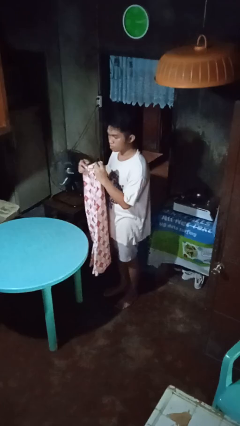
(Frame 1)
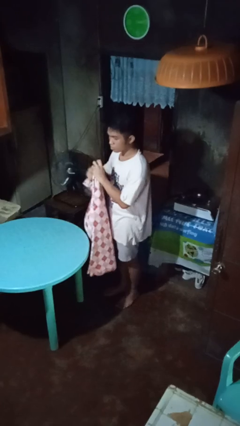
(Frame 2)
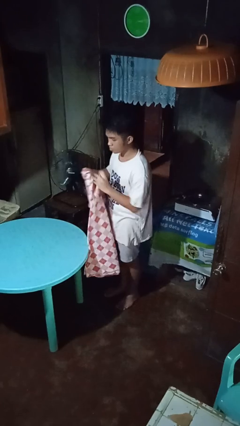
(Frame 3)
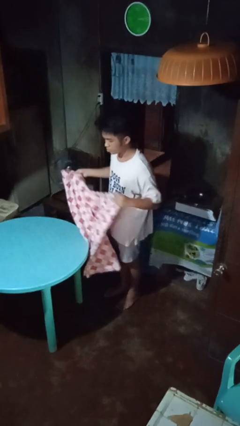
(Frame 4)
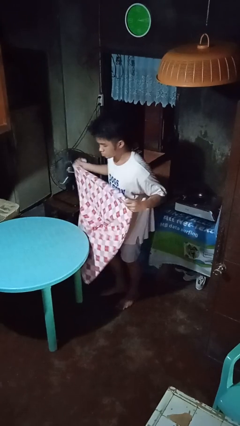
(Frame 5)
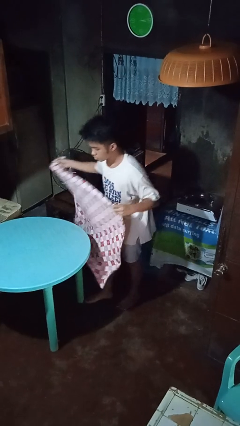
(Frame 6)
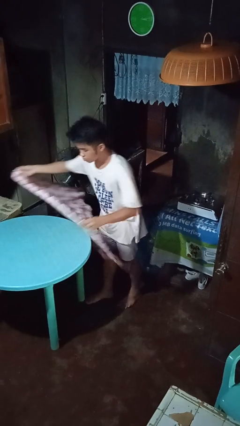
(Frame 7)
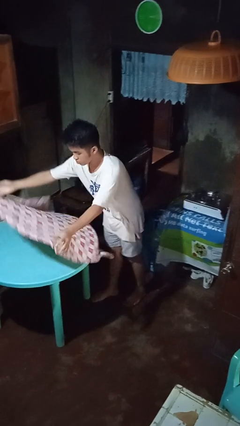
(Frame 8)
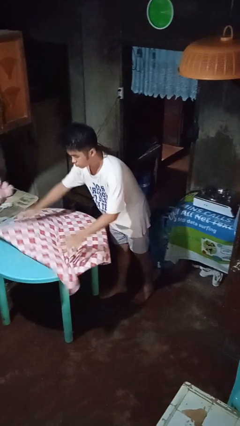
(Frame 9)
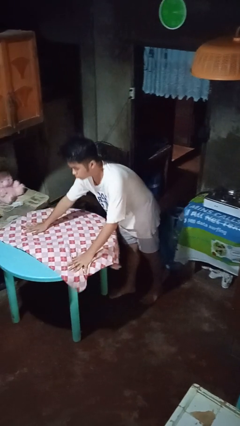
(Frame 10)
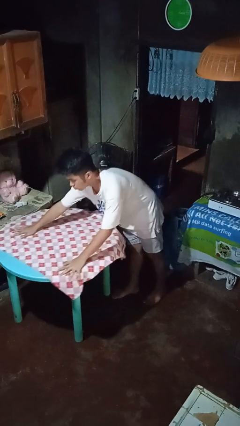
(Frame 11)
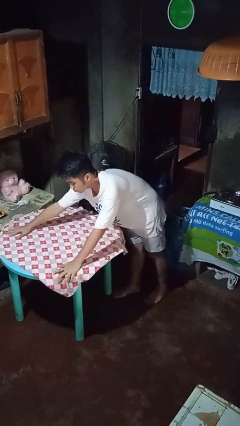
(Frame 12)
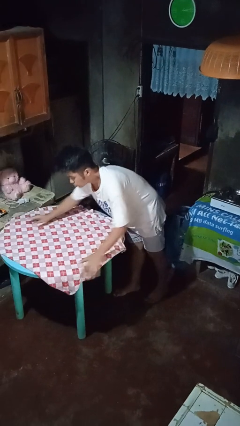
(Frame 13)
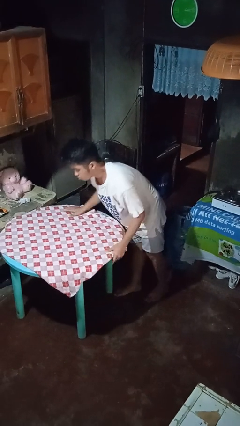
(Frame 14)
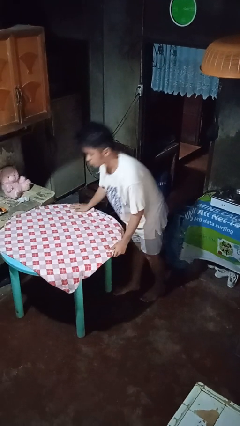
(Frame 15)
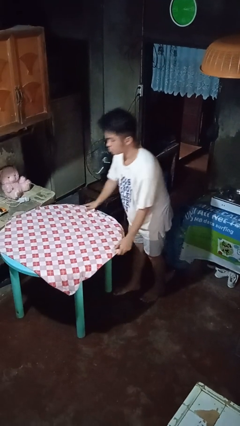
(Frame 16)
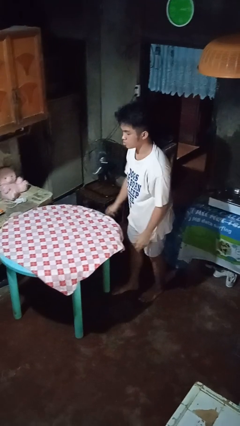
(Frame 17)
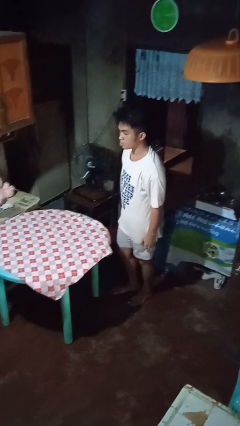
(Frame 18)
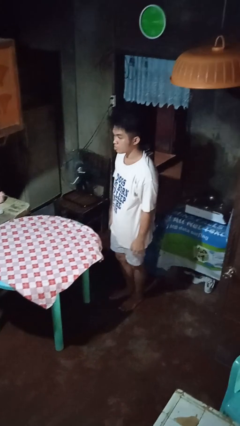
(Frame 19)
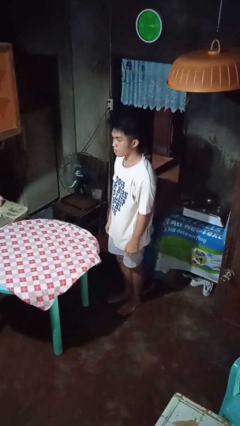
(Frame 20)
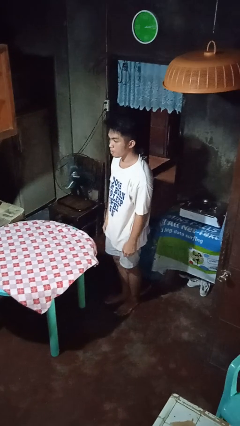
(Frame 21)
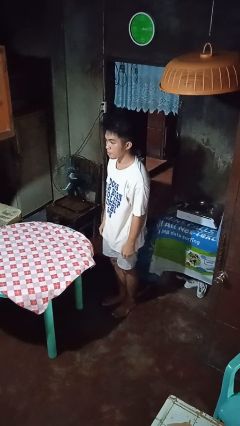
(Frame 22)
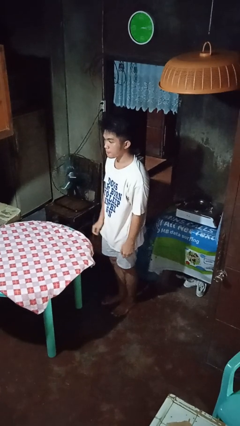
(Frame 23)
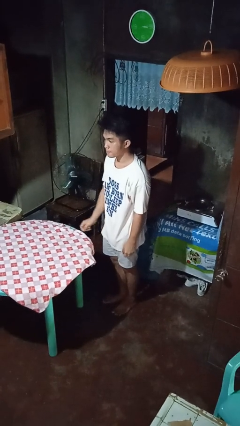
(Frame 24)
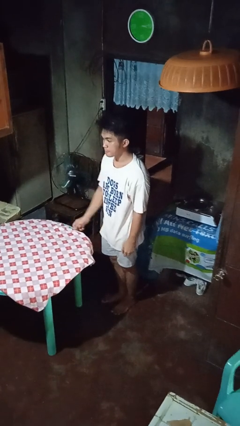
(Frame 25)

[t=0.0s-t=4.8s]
person spreads tablecloth

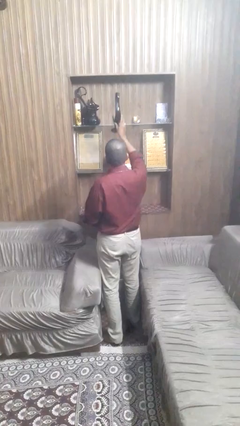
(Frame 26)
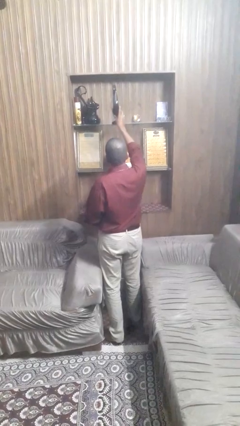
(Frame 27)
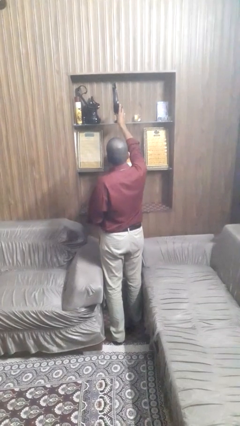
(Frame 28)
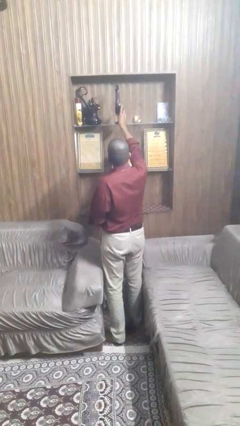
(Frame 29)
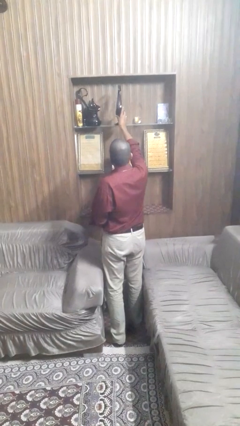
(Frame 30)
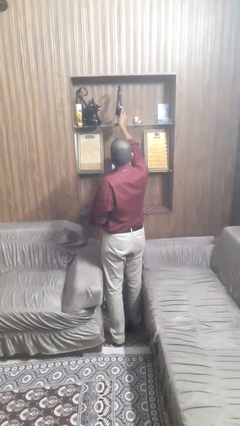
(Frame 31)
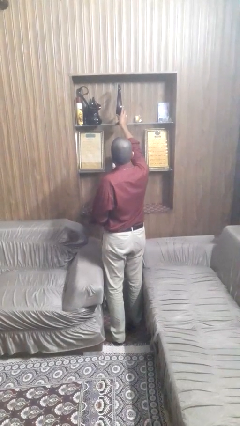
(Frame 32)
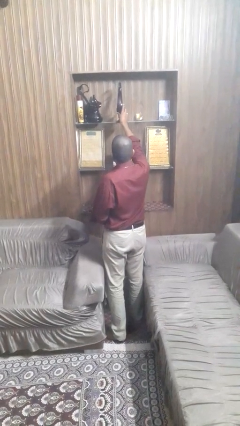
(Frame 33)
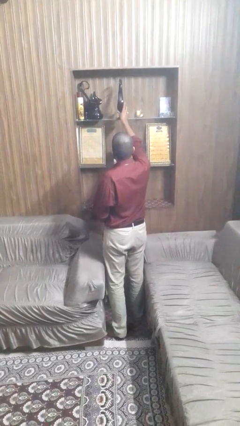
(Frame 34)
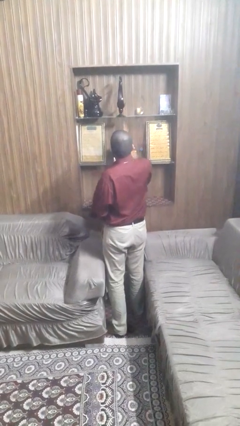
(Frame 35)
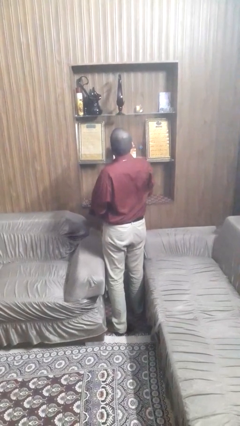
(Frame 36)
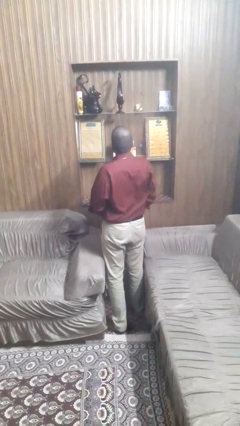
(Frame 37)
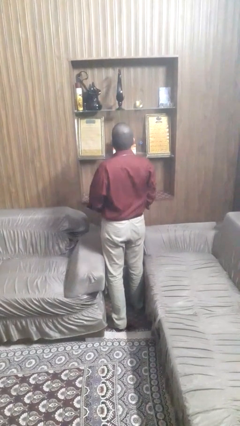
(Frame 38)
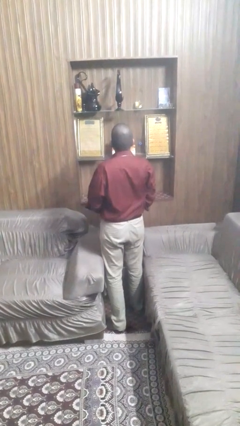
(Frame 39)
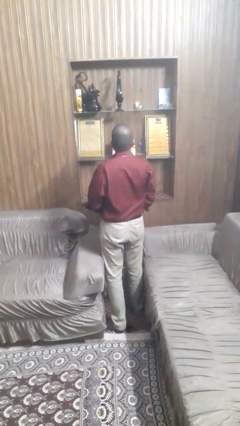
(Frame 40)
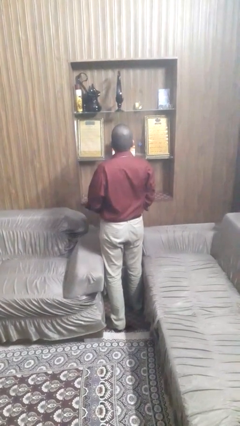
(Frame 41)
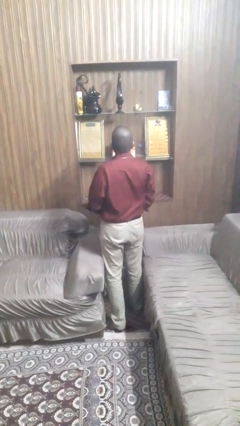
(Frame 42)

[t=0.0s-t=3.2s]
person puts down object on shelf

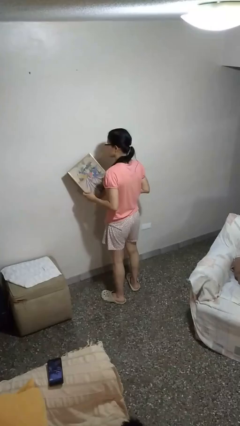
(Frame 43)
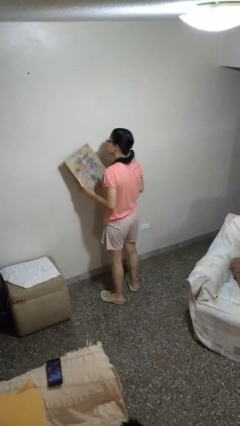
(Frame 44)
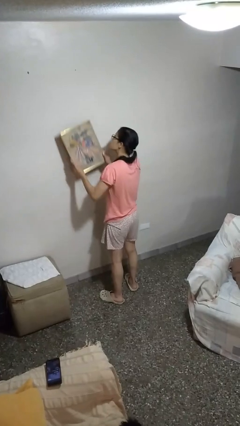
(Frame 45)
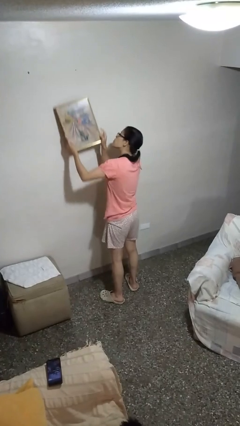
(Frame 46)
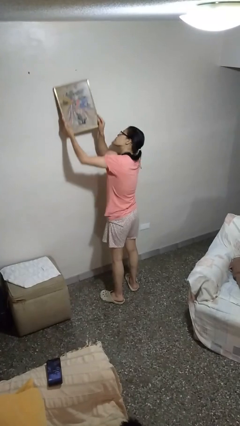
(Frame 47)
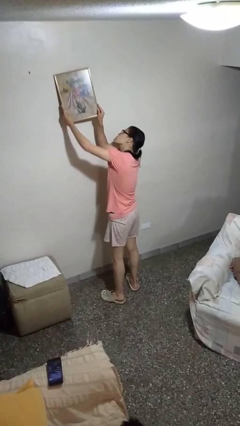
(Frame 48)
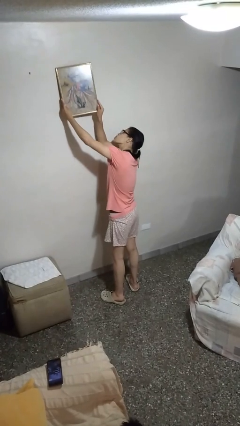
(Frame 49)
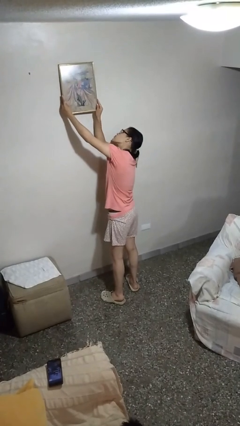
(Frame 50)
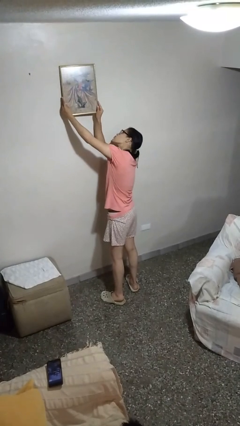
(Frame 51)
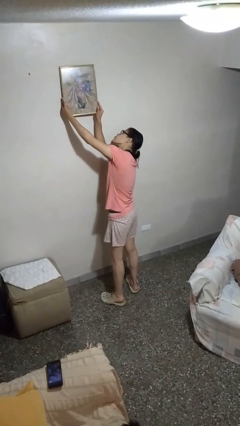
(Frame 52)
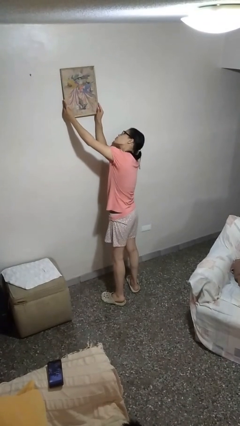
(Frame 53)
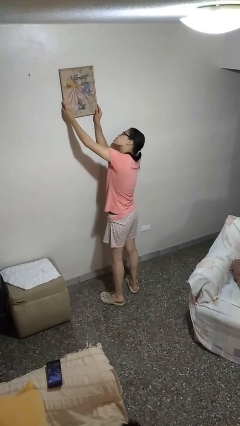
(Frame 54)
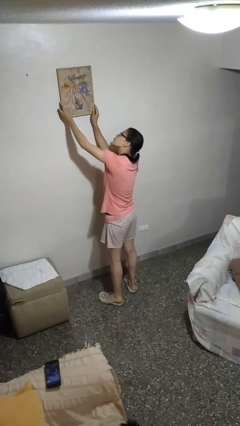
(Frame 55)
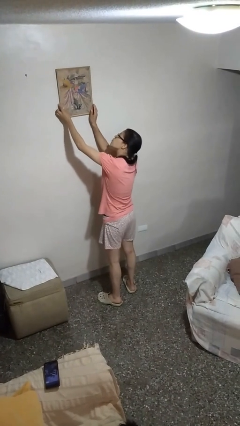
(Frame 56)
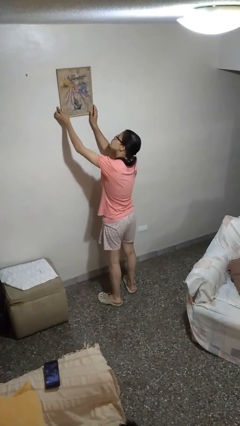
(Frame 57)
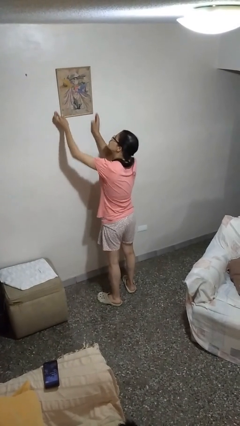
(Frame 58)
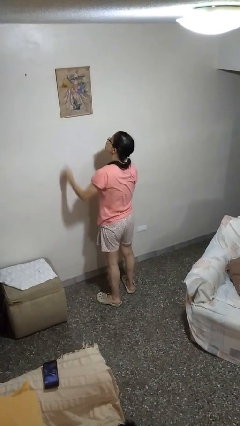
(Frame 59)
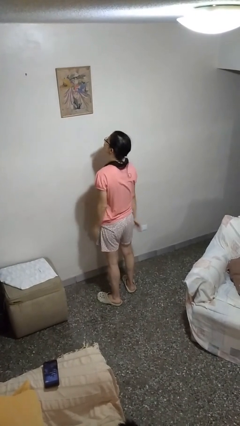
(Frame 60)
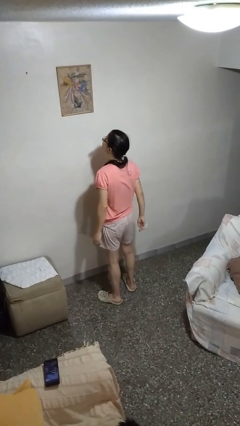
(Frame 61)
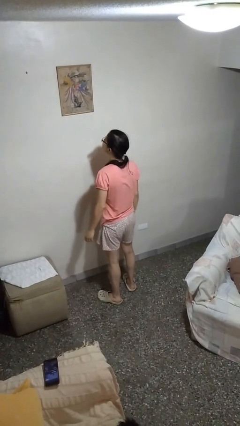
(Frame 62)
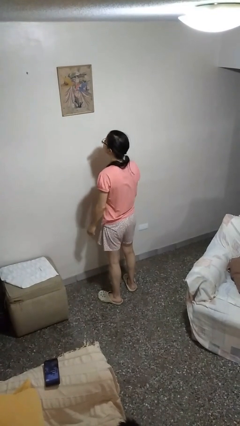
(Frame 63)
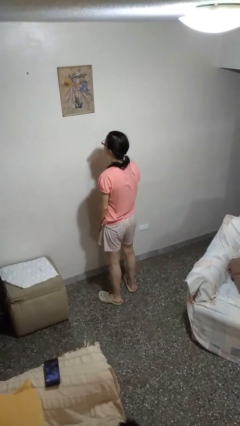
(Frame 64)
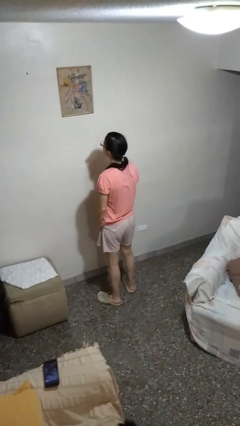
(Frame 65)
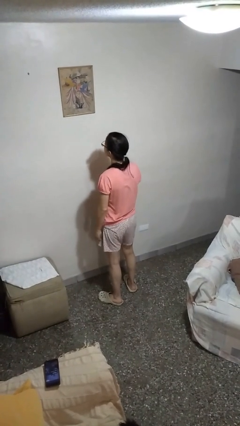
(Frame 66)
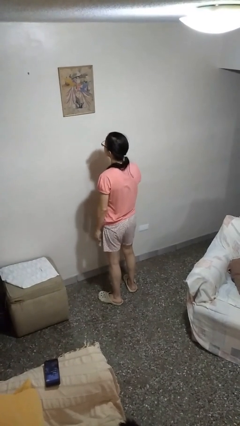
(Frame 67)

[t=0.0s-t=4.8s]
person puts up picture frame

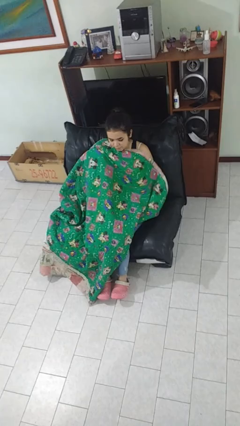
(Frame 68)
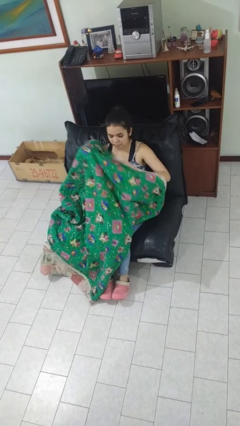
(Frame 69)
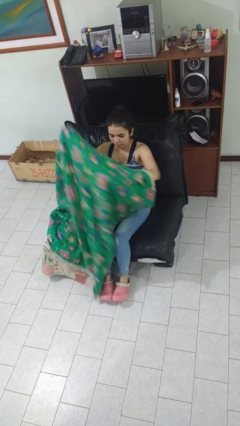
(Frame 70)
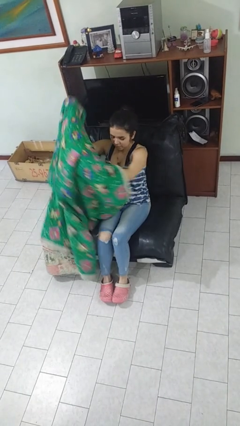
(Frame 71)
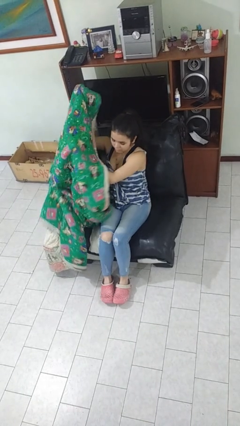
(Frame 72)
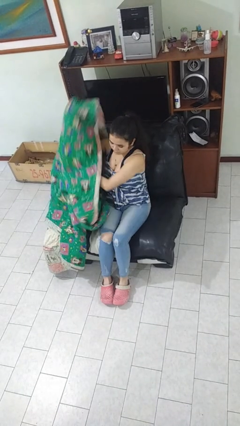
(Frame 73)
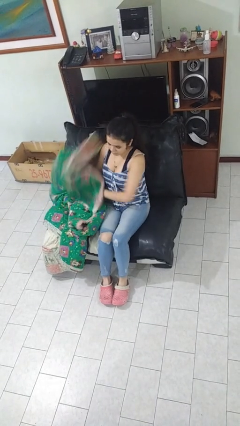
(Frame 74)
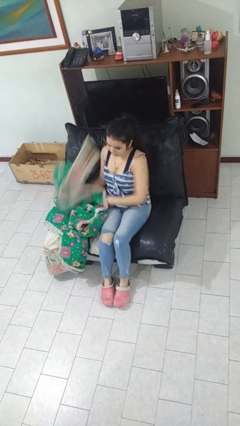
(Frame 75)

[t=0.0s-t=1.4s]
person uncovers with blanket

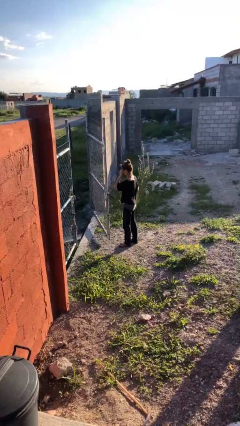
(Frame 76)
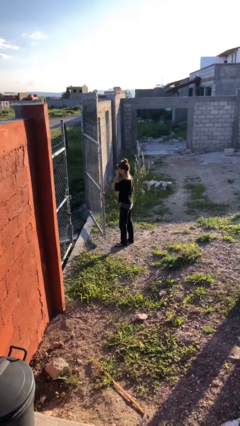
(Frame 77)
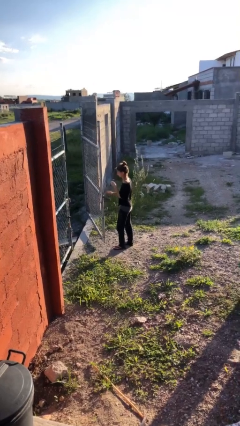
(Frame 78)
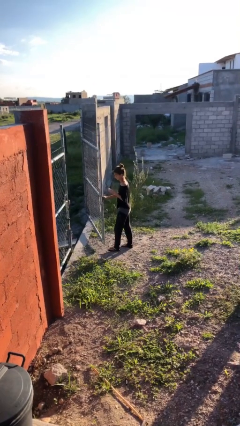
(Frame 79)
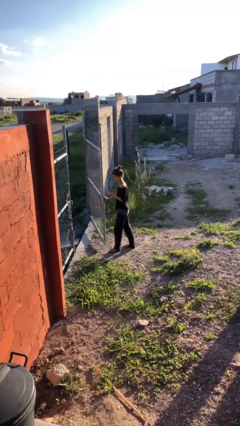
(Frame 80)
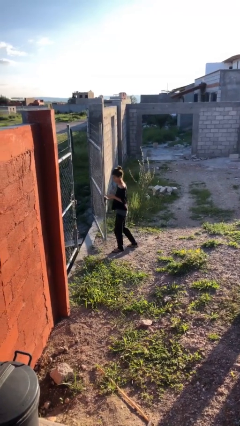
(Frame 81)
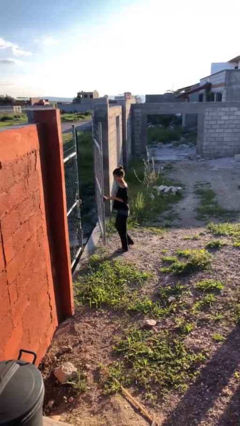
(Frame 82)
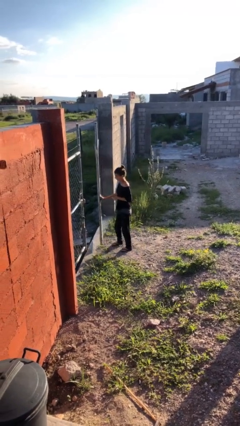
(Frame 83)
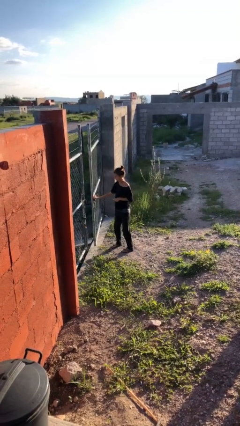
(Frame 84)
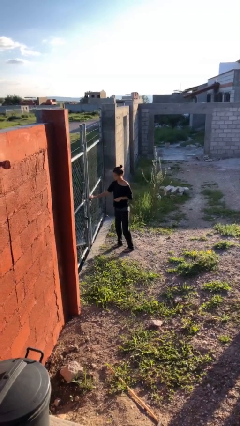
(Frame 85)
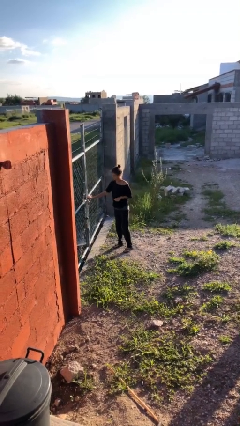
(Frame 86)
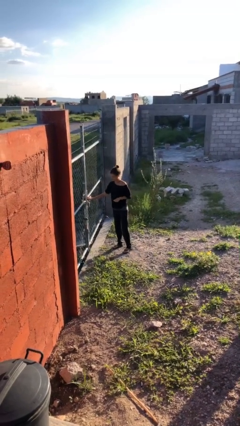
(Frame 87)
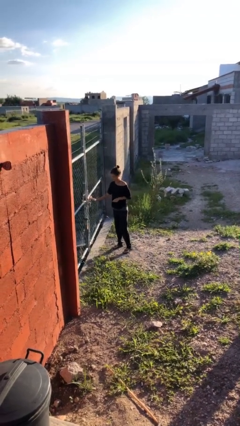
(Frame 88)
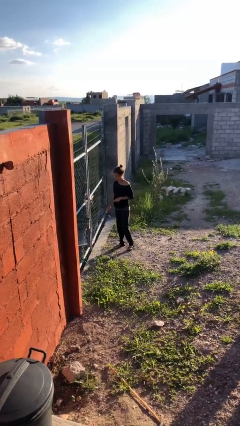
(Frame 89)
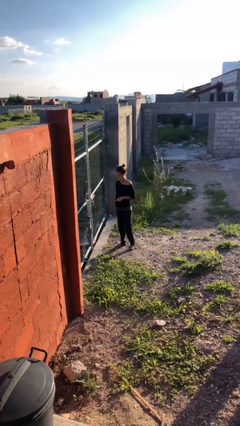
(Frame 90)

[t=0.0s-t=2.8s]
person closes gate

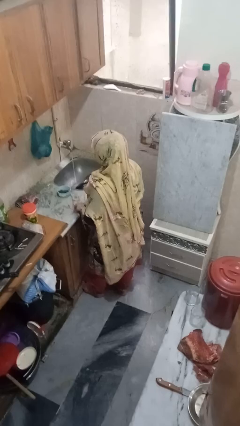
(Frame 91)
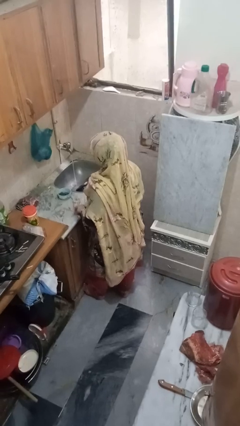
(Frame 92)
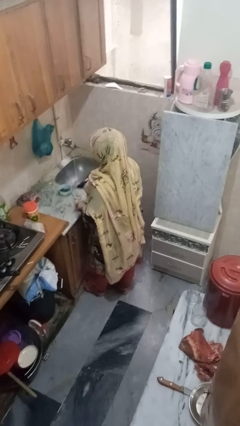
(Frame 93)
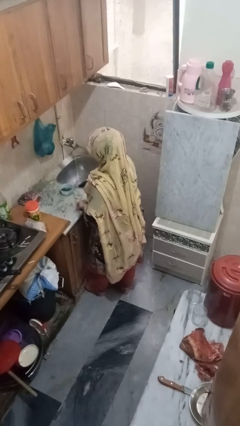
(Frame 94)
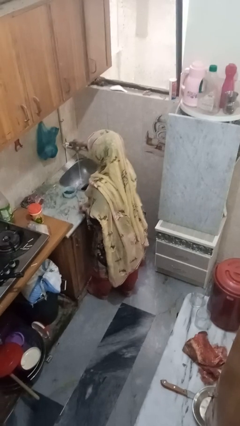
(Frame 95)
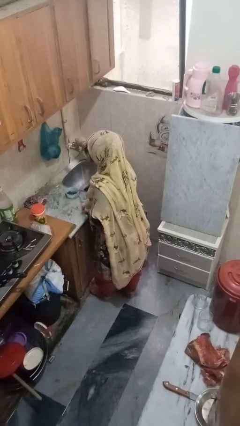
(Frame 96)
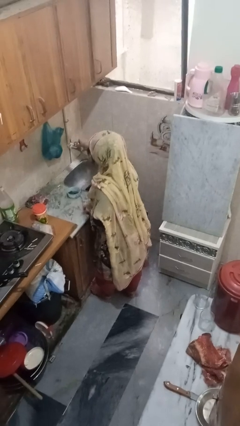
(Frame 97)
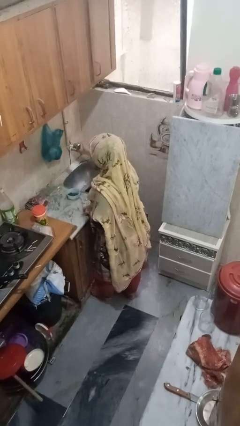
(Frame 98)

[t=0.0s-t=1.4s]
person turns off faucet
